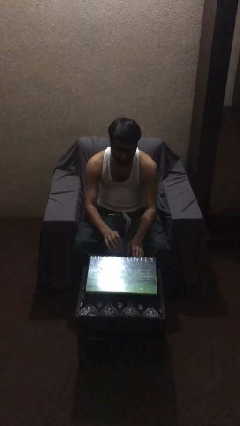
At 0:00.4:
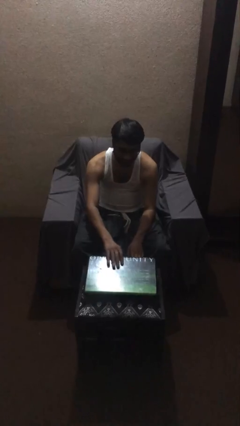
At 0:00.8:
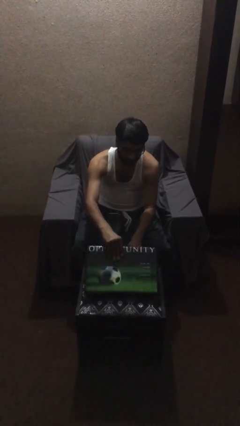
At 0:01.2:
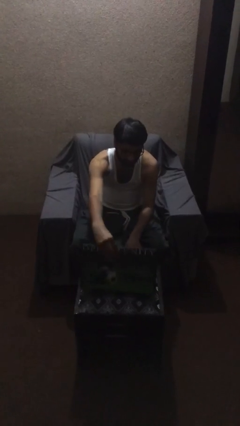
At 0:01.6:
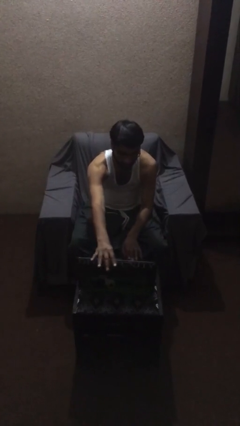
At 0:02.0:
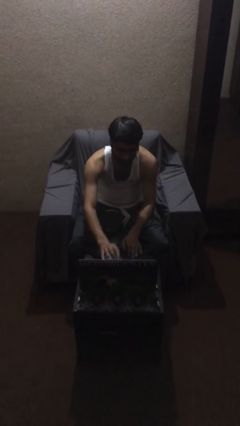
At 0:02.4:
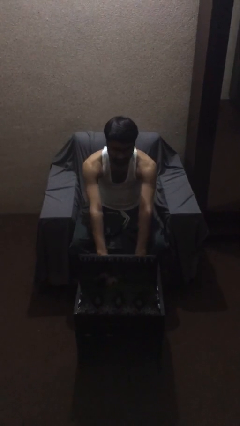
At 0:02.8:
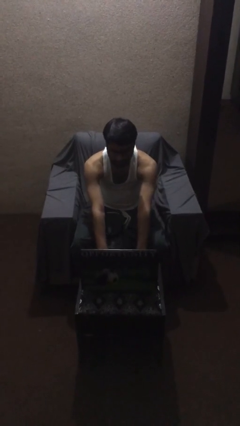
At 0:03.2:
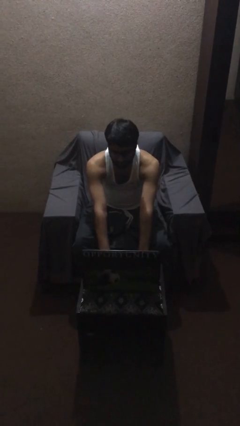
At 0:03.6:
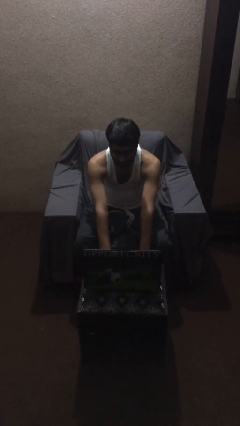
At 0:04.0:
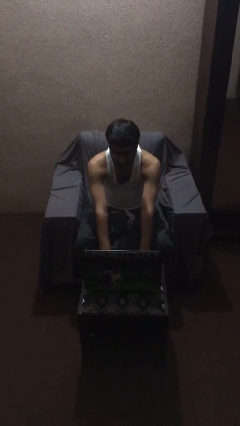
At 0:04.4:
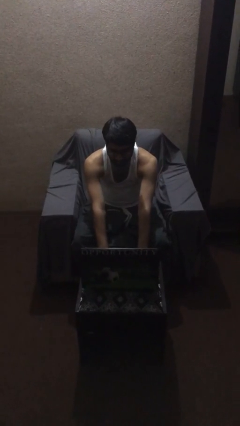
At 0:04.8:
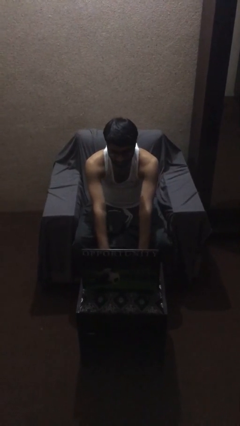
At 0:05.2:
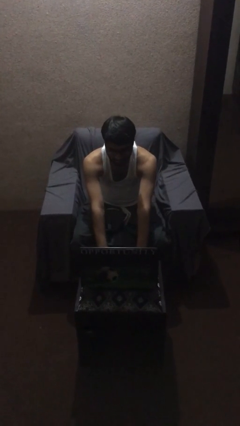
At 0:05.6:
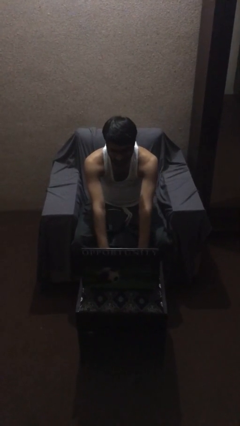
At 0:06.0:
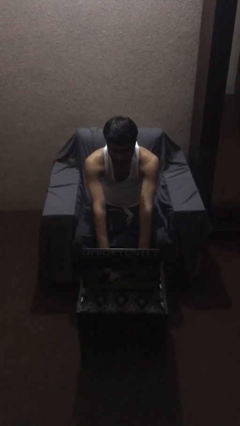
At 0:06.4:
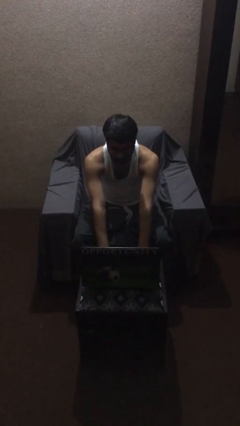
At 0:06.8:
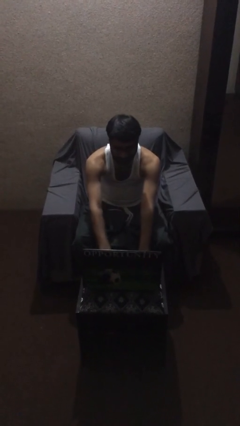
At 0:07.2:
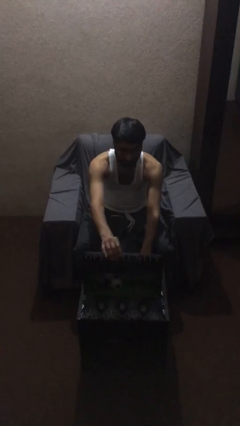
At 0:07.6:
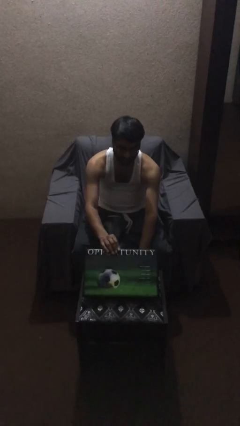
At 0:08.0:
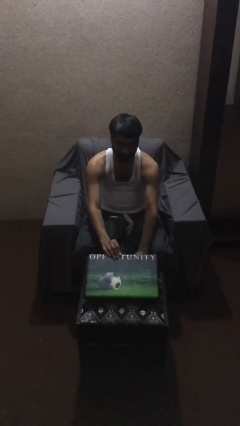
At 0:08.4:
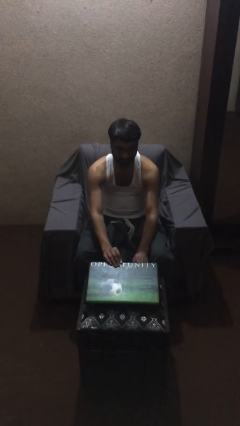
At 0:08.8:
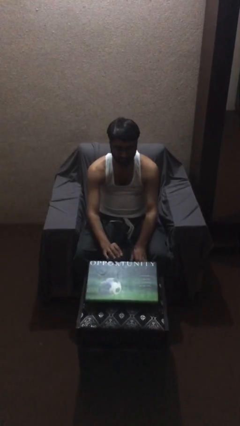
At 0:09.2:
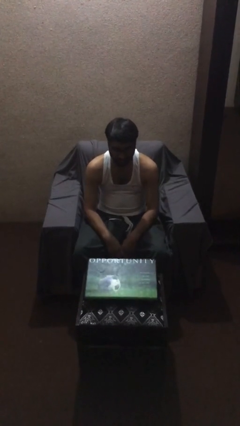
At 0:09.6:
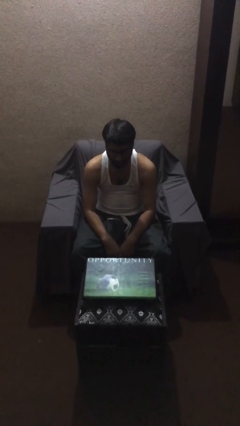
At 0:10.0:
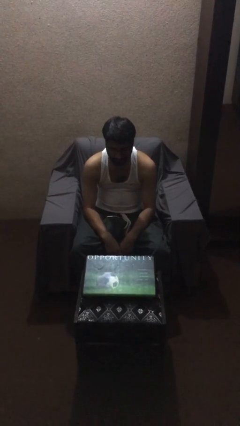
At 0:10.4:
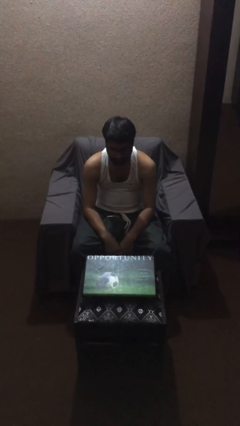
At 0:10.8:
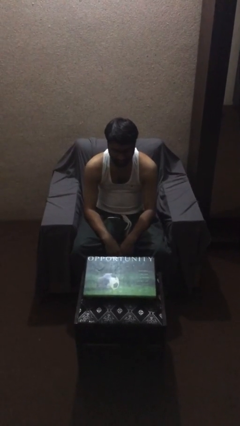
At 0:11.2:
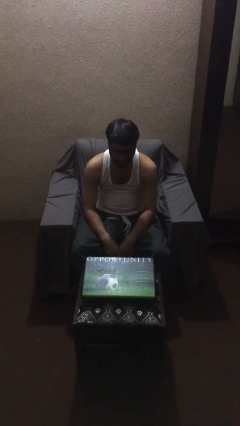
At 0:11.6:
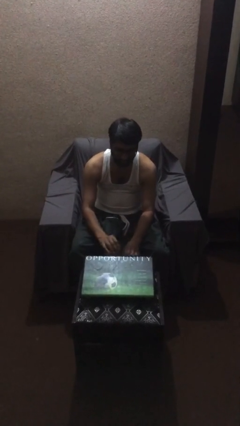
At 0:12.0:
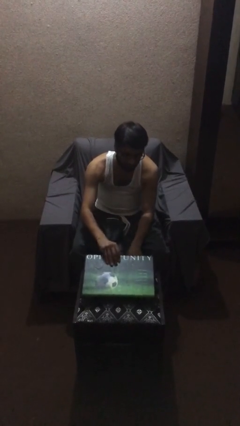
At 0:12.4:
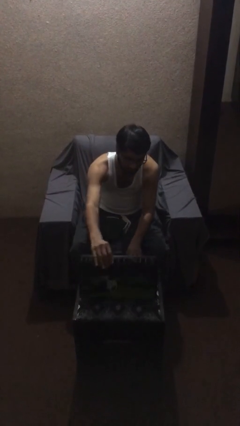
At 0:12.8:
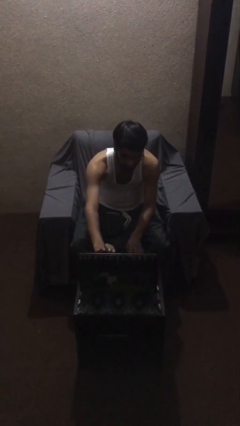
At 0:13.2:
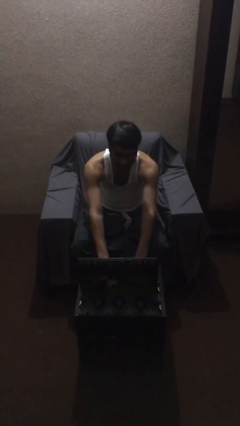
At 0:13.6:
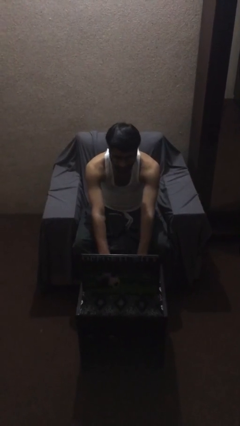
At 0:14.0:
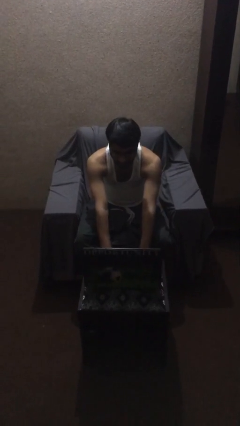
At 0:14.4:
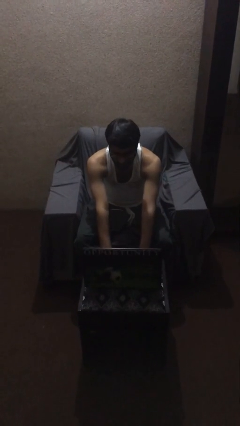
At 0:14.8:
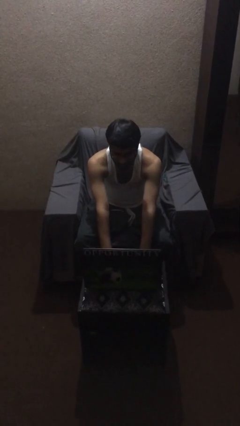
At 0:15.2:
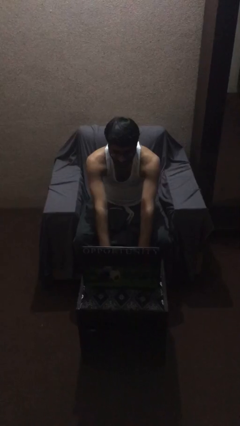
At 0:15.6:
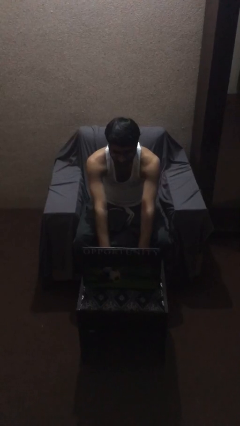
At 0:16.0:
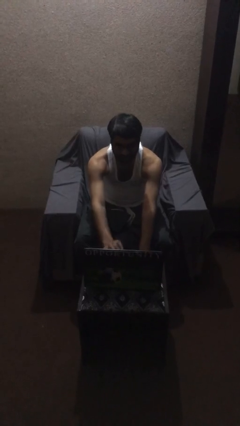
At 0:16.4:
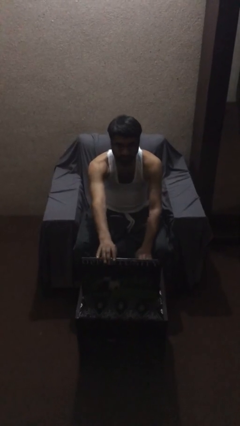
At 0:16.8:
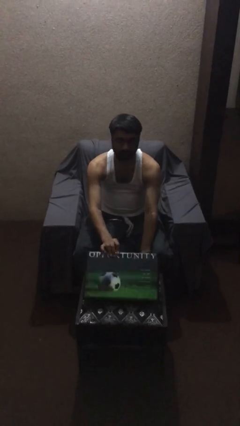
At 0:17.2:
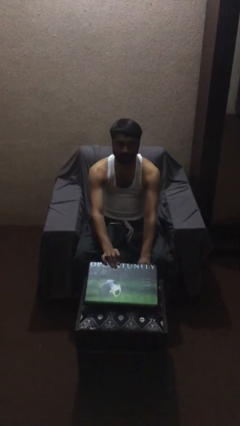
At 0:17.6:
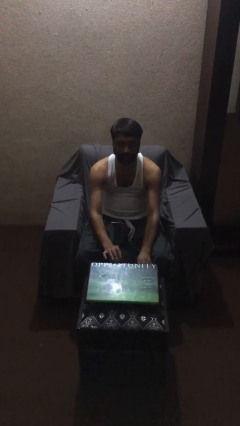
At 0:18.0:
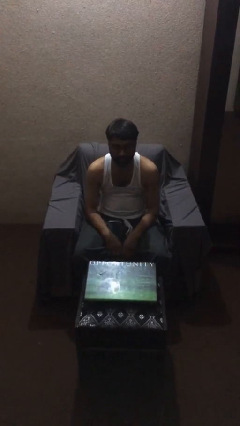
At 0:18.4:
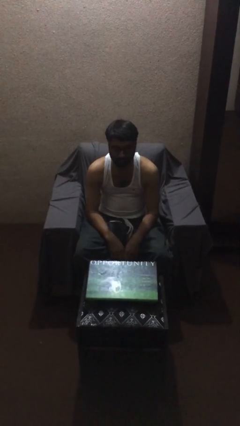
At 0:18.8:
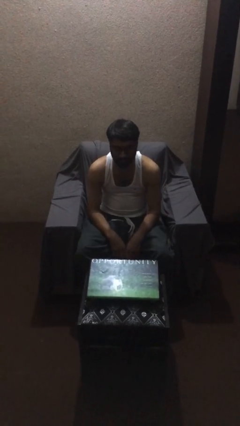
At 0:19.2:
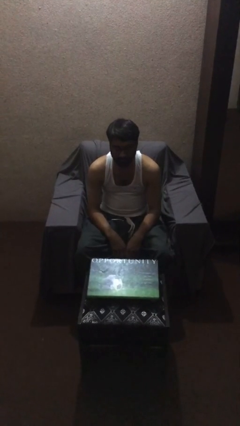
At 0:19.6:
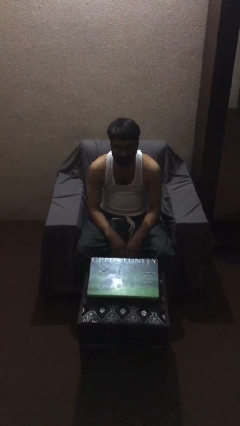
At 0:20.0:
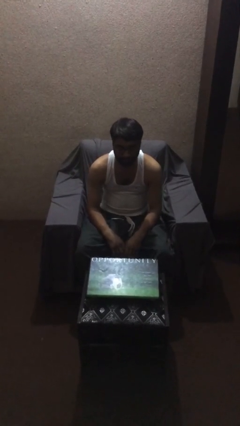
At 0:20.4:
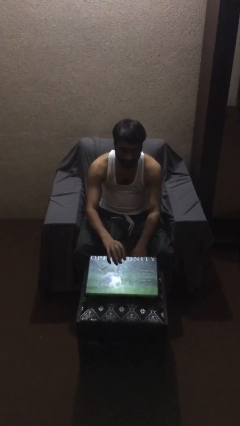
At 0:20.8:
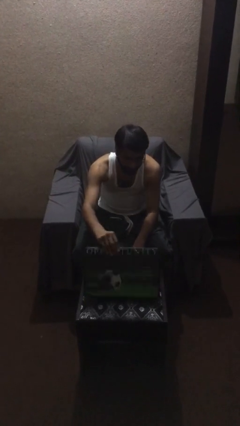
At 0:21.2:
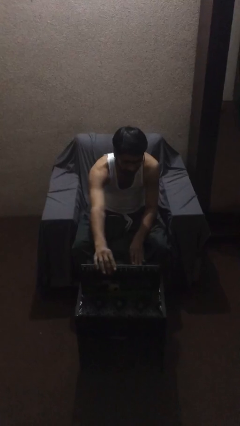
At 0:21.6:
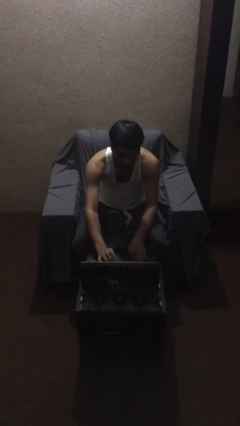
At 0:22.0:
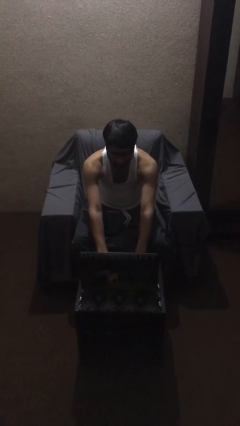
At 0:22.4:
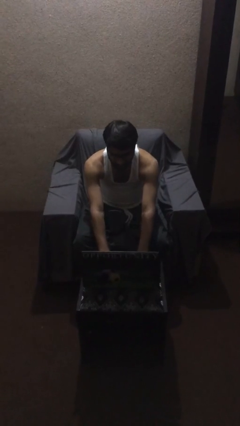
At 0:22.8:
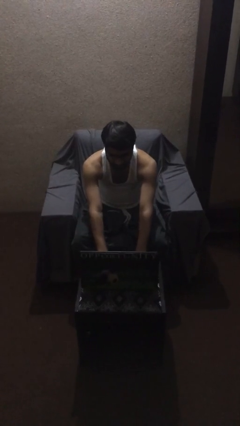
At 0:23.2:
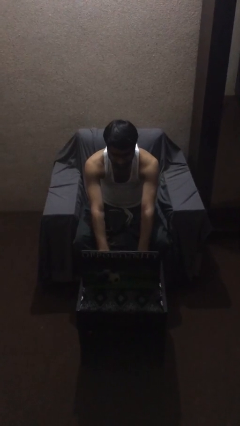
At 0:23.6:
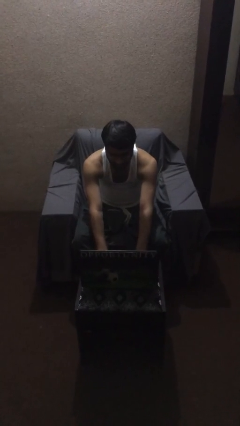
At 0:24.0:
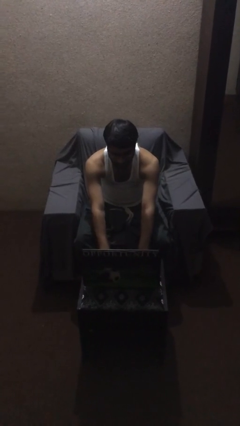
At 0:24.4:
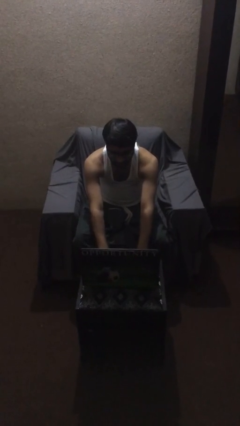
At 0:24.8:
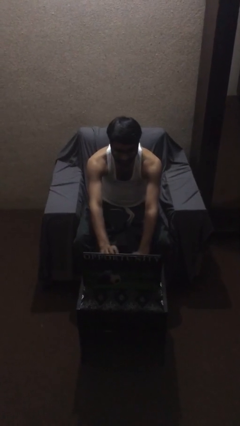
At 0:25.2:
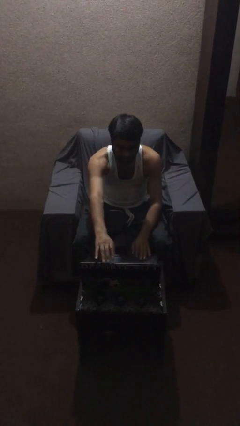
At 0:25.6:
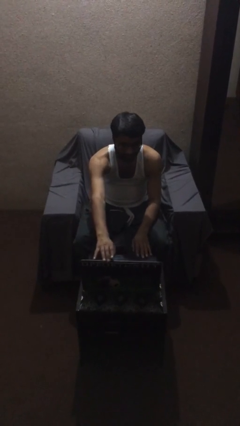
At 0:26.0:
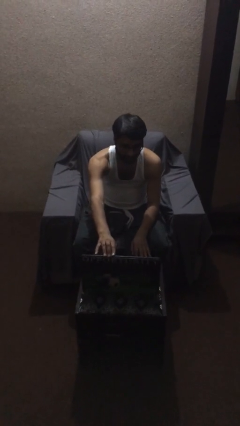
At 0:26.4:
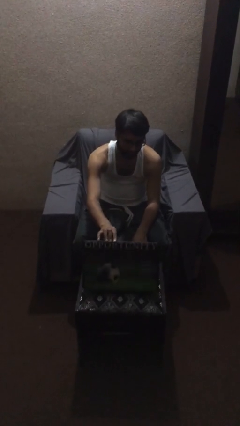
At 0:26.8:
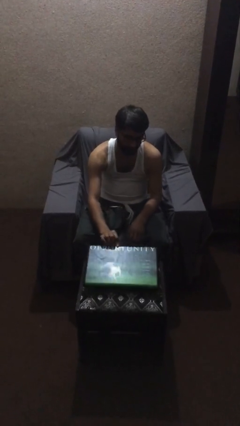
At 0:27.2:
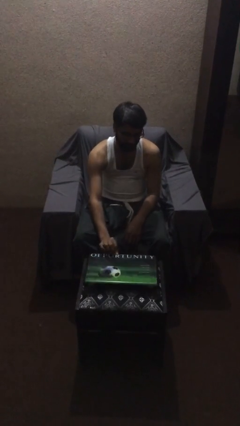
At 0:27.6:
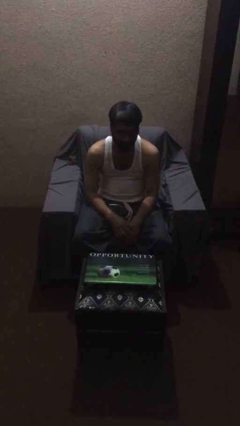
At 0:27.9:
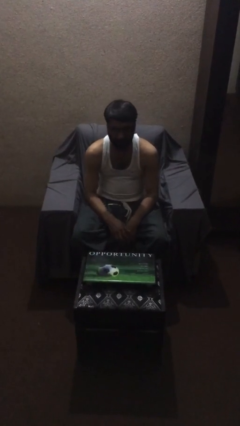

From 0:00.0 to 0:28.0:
person interacts with laptop

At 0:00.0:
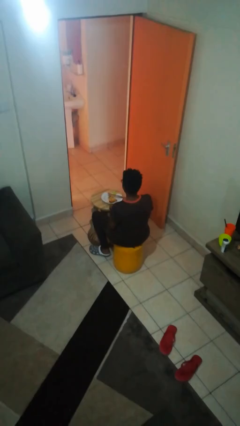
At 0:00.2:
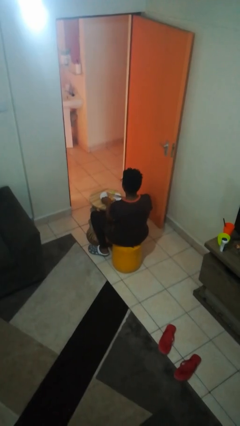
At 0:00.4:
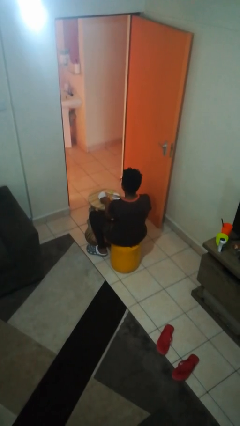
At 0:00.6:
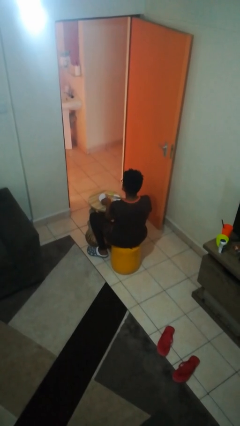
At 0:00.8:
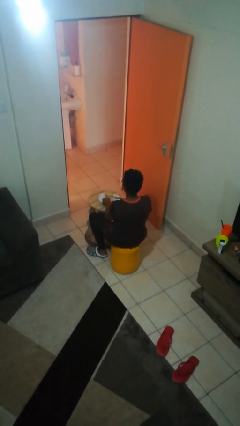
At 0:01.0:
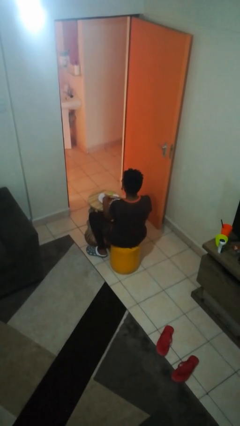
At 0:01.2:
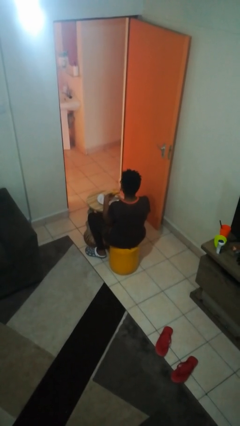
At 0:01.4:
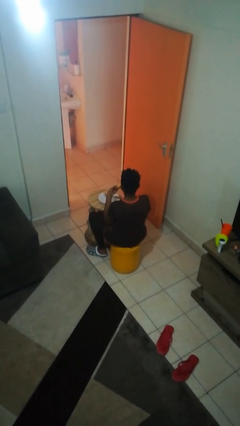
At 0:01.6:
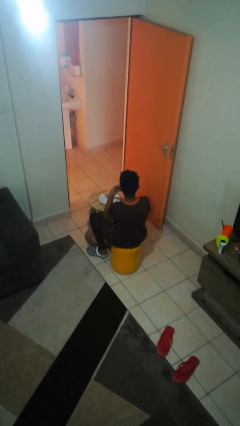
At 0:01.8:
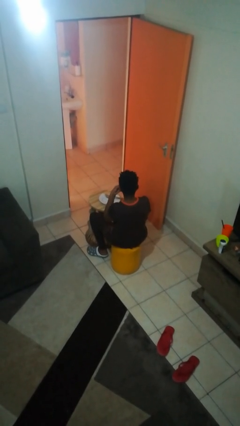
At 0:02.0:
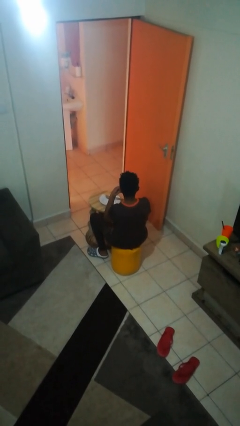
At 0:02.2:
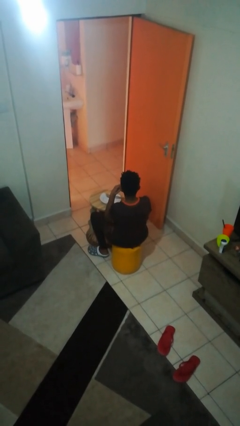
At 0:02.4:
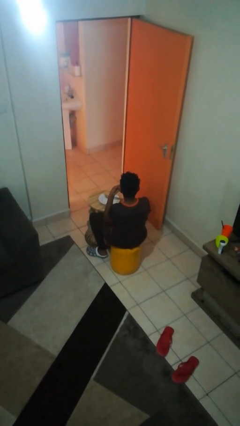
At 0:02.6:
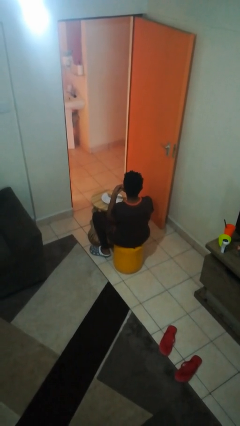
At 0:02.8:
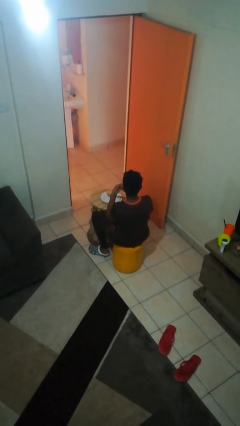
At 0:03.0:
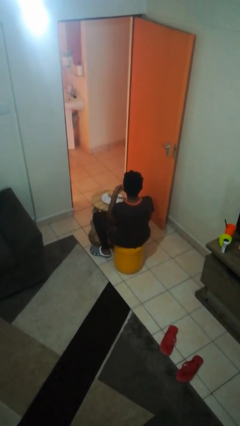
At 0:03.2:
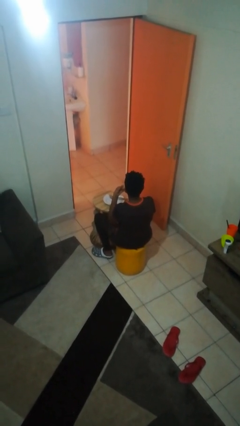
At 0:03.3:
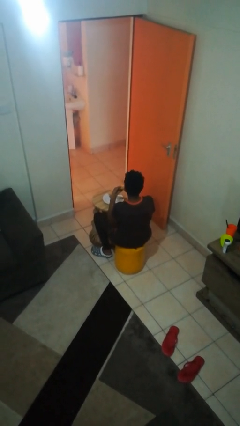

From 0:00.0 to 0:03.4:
person eats with hands

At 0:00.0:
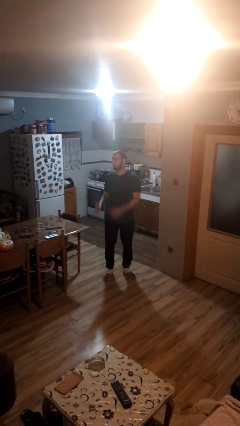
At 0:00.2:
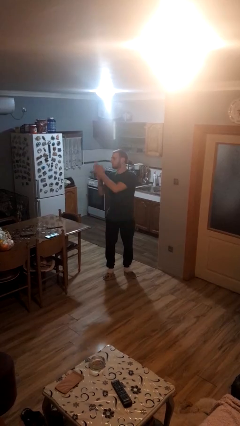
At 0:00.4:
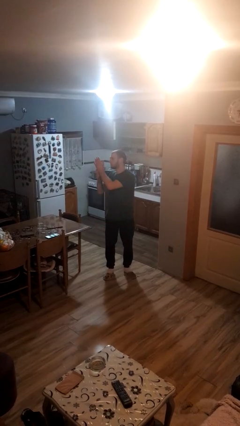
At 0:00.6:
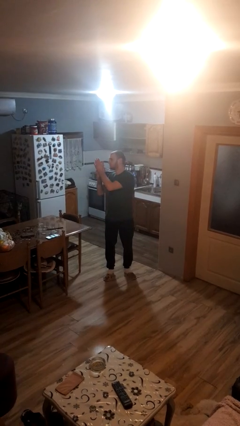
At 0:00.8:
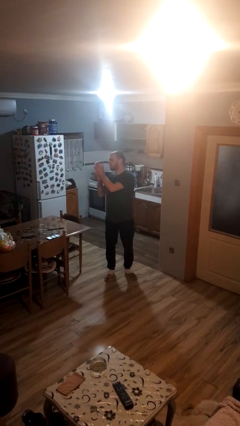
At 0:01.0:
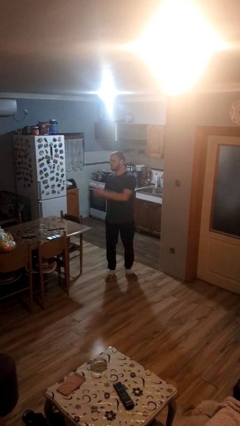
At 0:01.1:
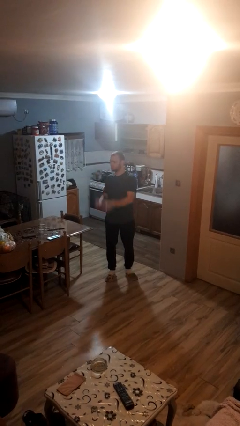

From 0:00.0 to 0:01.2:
person claps hands
